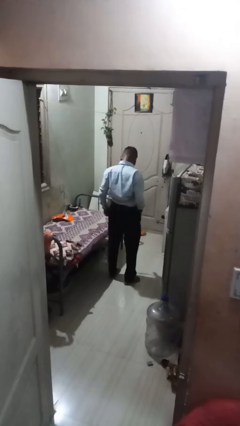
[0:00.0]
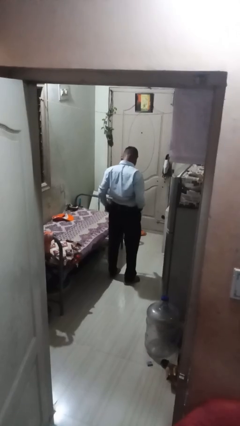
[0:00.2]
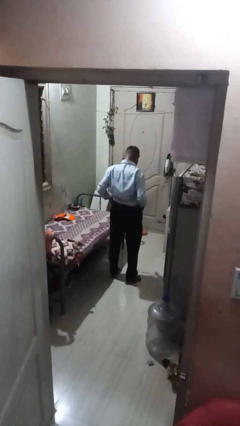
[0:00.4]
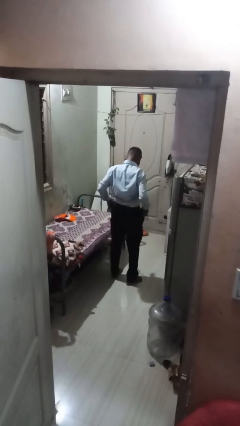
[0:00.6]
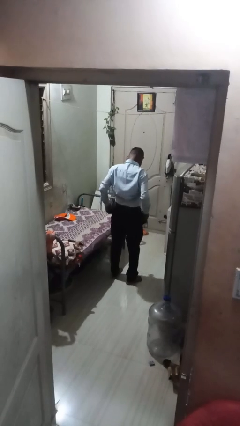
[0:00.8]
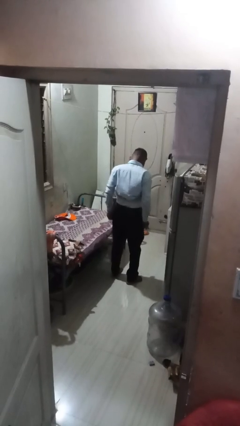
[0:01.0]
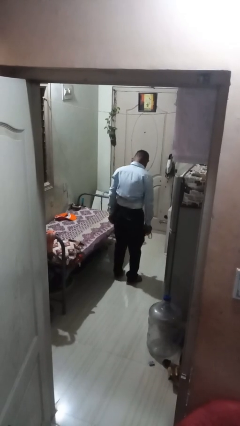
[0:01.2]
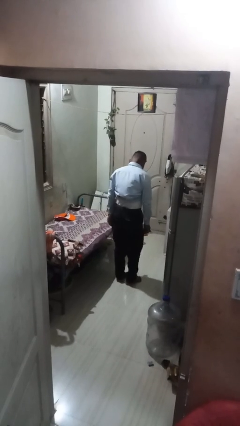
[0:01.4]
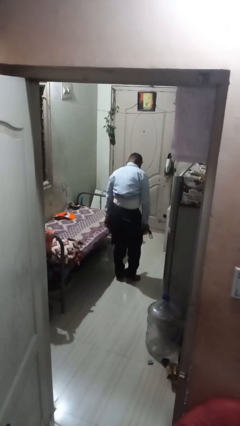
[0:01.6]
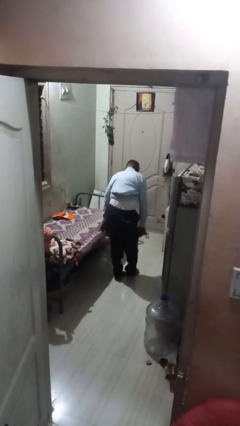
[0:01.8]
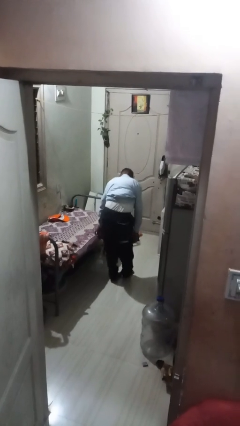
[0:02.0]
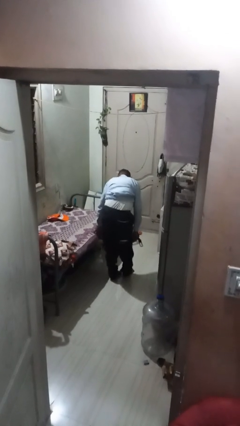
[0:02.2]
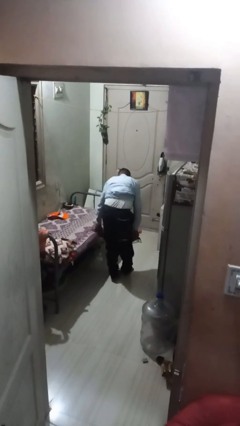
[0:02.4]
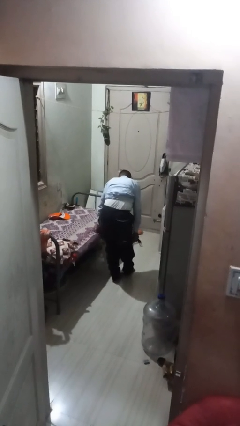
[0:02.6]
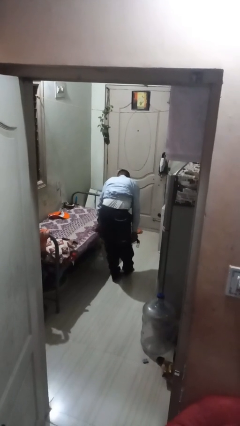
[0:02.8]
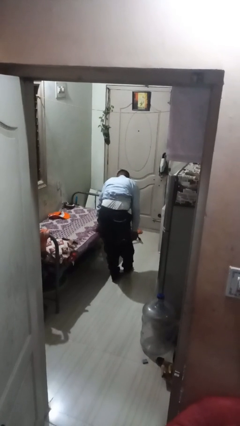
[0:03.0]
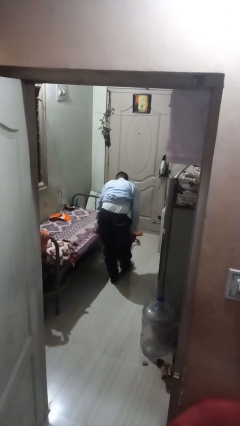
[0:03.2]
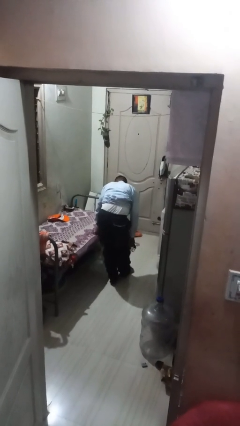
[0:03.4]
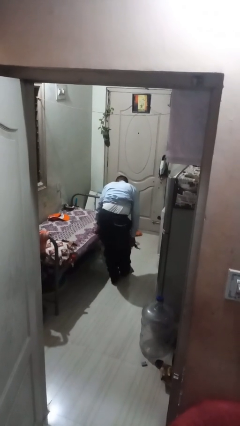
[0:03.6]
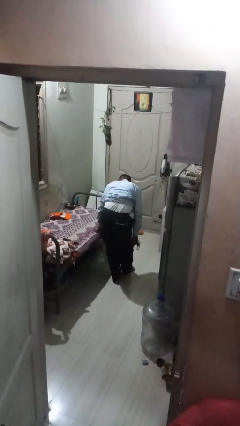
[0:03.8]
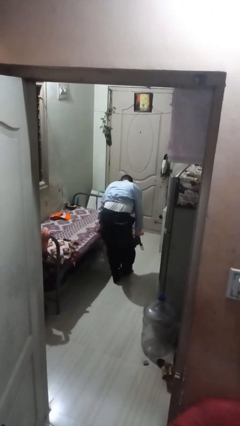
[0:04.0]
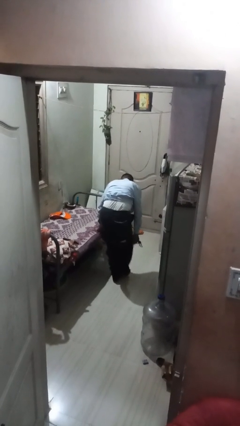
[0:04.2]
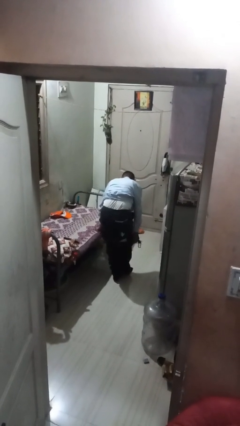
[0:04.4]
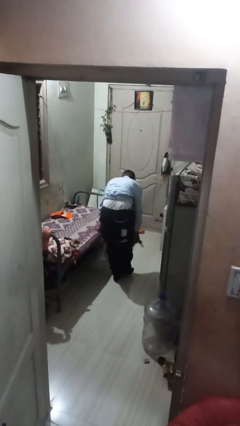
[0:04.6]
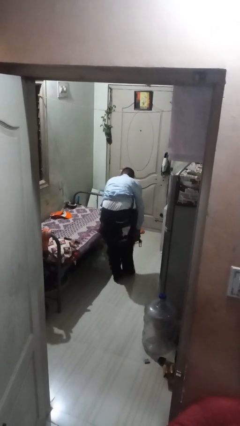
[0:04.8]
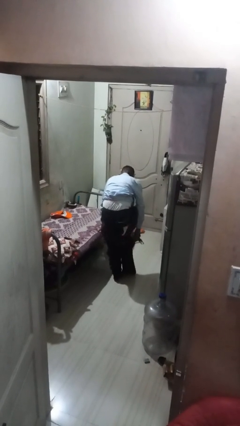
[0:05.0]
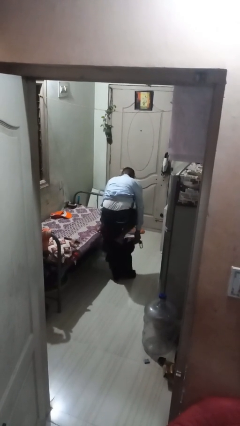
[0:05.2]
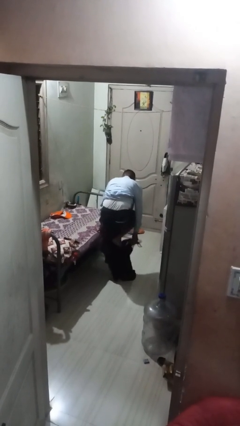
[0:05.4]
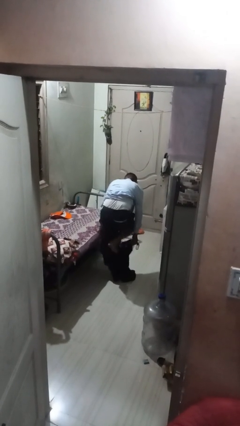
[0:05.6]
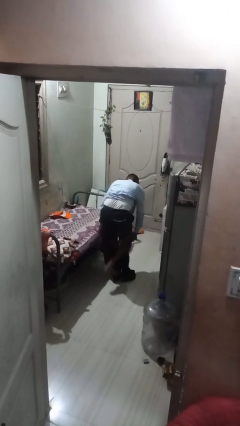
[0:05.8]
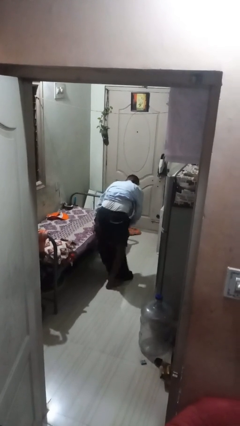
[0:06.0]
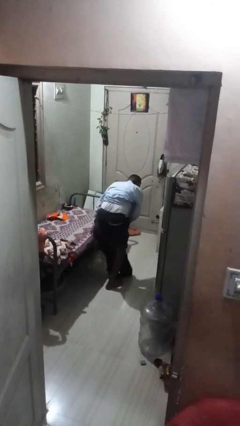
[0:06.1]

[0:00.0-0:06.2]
person takes off pants

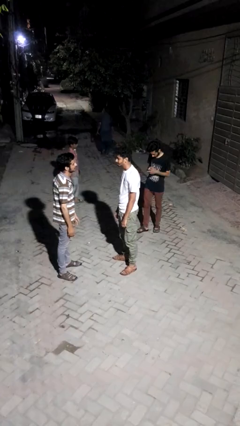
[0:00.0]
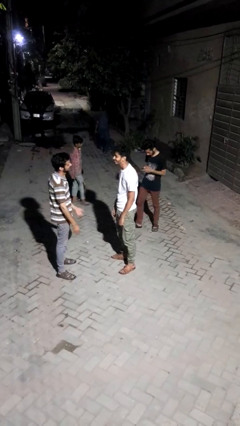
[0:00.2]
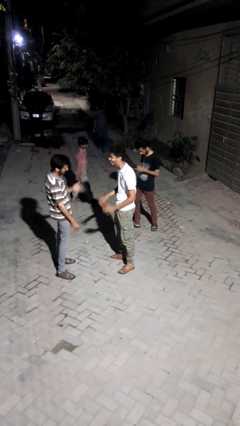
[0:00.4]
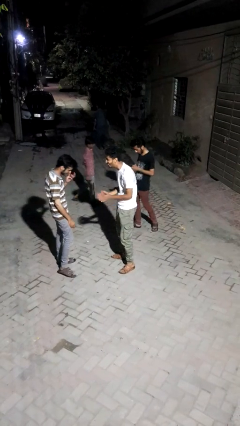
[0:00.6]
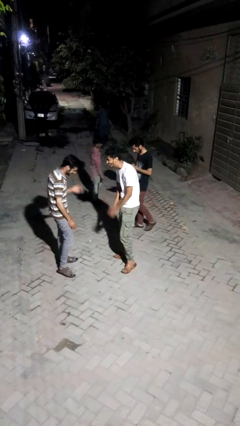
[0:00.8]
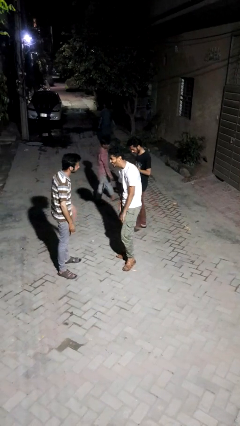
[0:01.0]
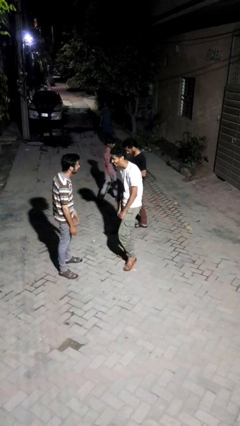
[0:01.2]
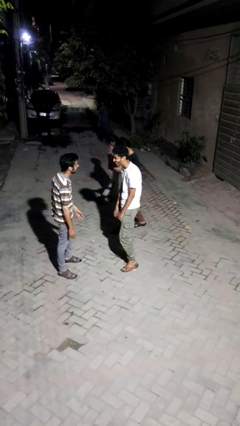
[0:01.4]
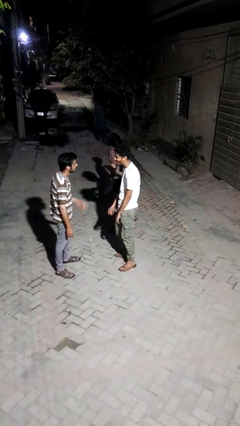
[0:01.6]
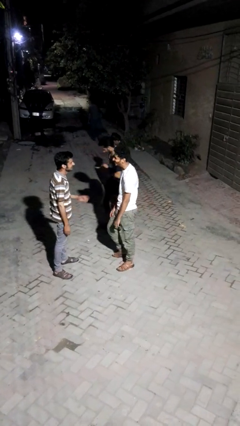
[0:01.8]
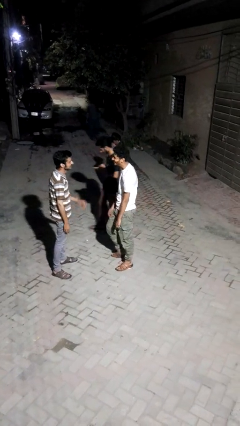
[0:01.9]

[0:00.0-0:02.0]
person laughs with person

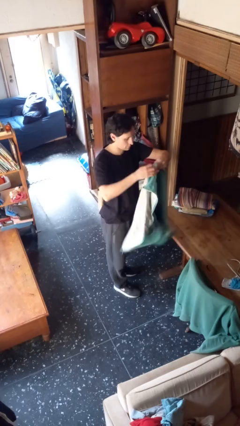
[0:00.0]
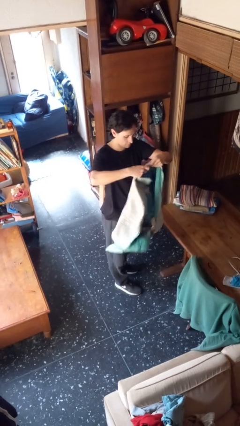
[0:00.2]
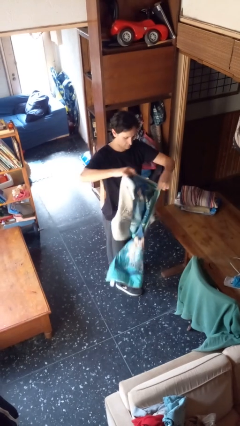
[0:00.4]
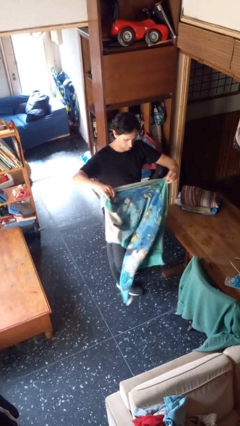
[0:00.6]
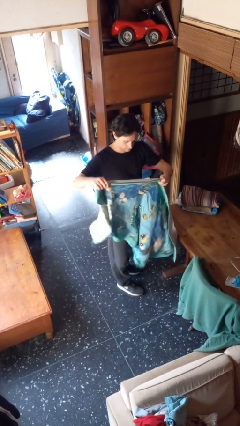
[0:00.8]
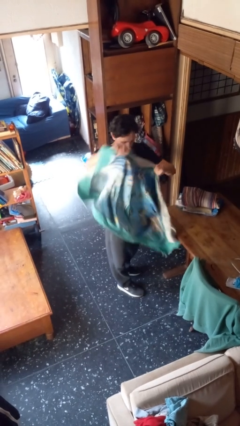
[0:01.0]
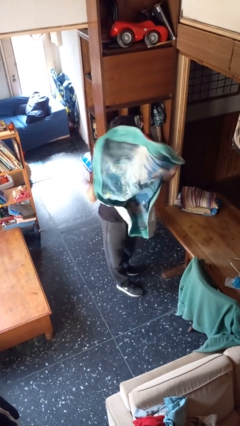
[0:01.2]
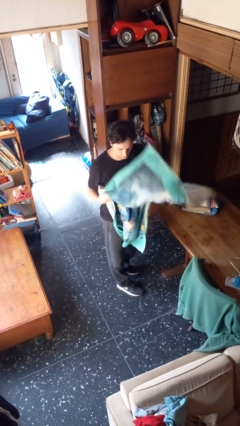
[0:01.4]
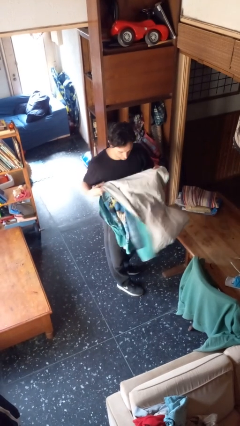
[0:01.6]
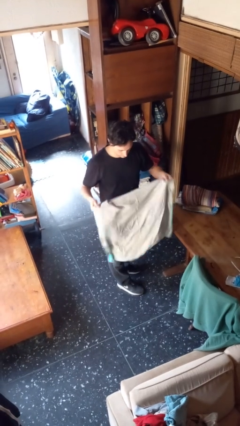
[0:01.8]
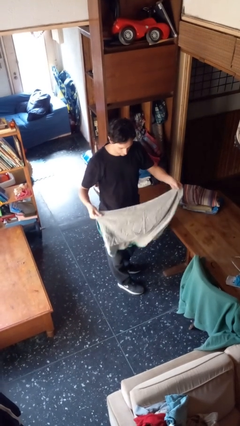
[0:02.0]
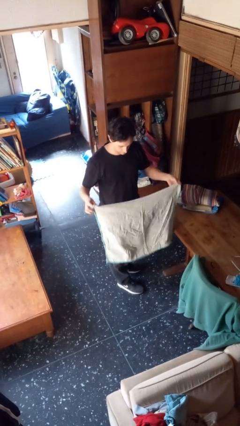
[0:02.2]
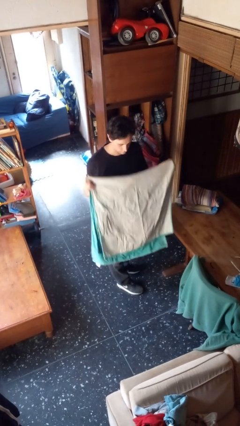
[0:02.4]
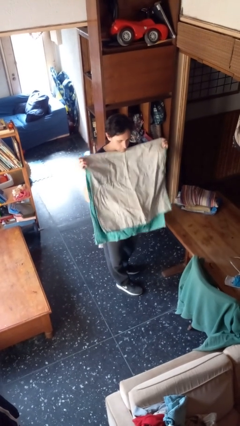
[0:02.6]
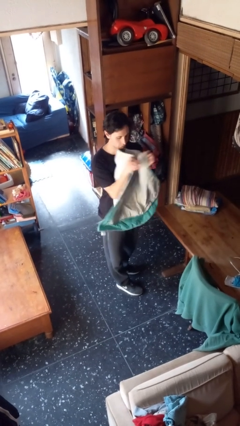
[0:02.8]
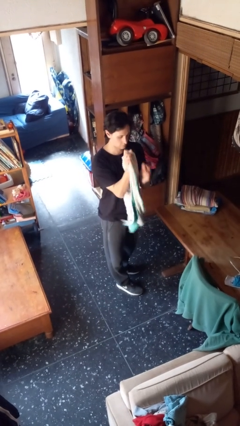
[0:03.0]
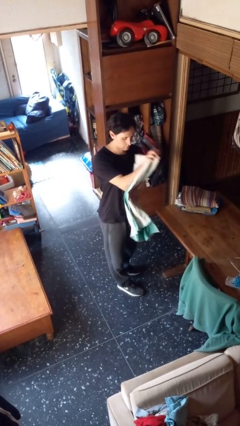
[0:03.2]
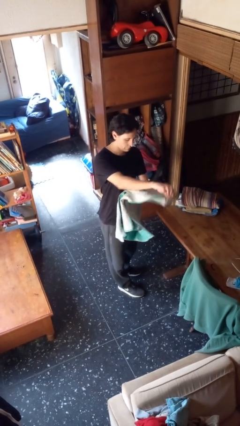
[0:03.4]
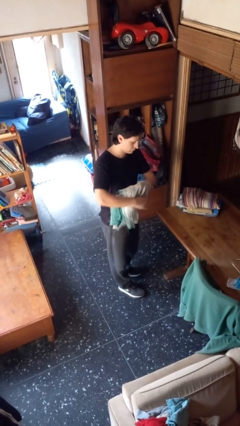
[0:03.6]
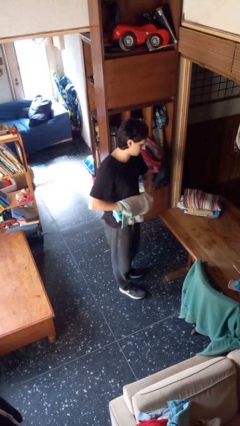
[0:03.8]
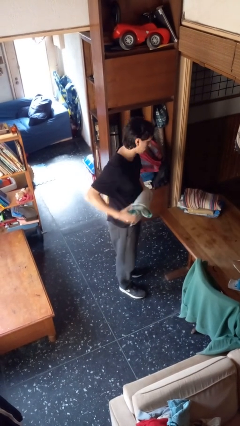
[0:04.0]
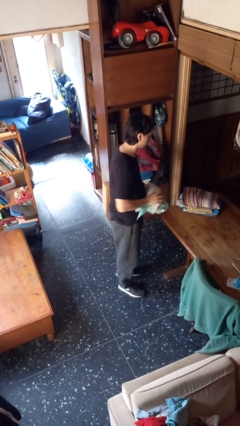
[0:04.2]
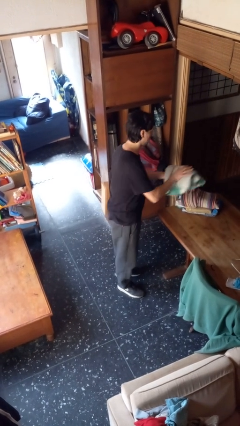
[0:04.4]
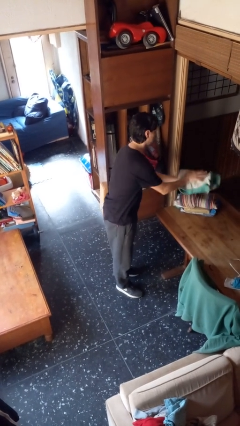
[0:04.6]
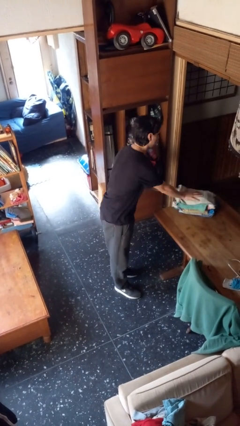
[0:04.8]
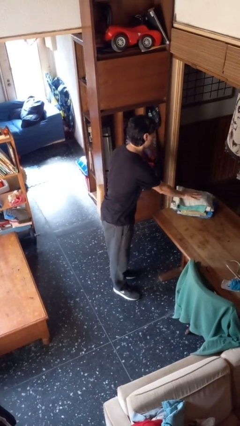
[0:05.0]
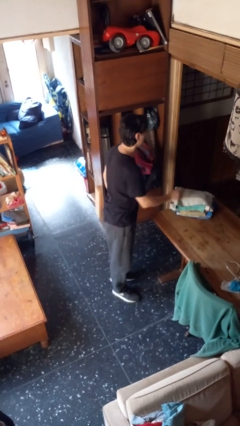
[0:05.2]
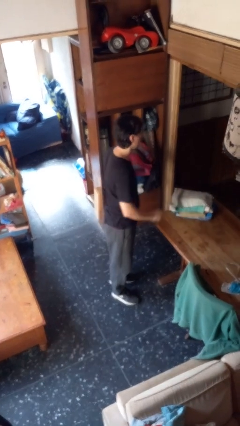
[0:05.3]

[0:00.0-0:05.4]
person folds towel

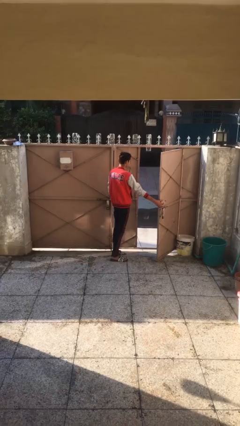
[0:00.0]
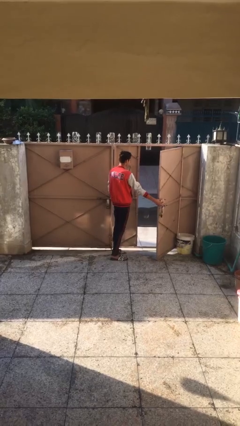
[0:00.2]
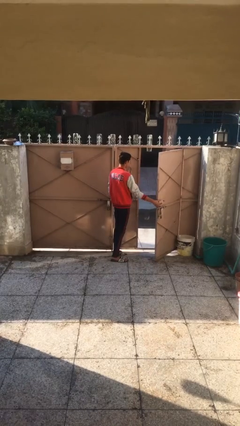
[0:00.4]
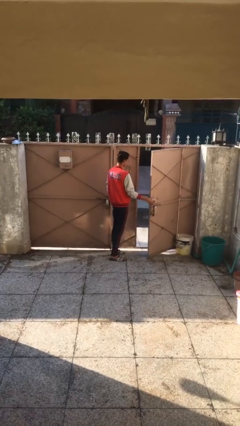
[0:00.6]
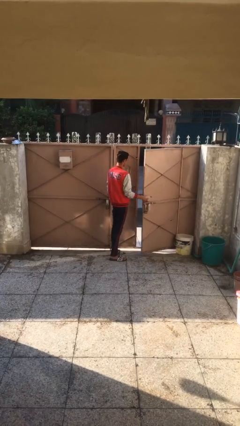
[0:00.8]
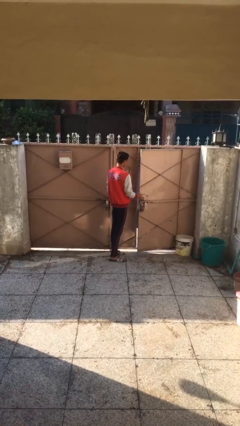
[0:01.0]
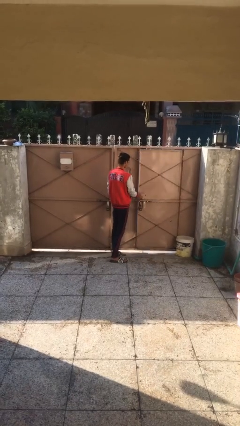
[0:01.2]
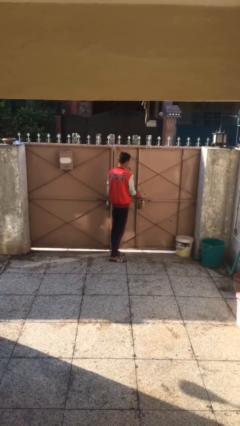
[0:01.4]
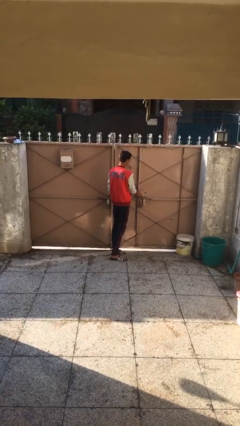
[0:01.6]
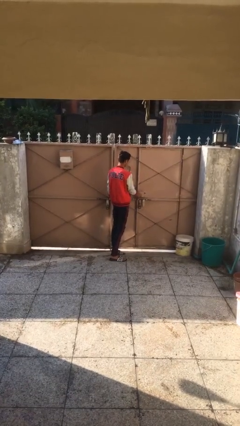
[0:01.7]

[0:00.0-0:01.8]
person closes facility door

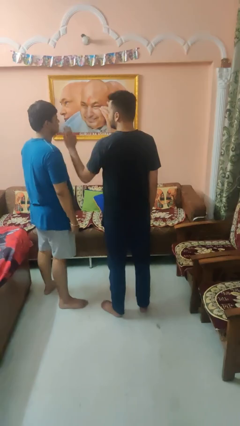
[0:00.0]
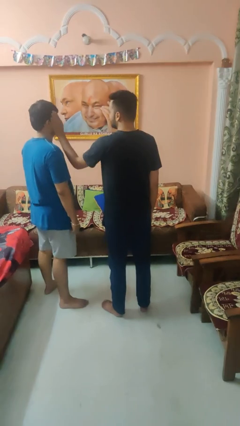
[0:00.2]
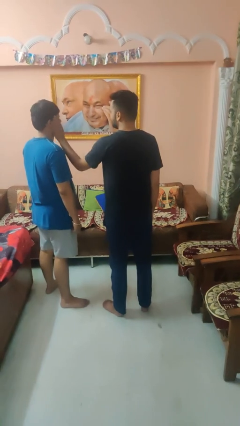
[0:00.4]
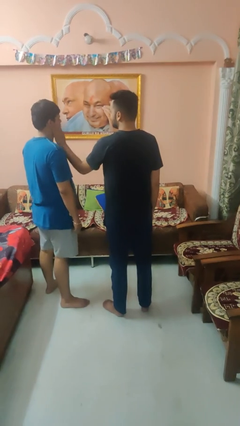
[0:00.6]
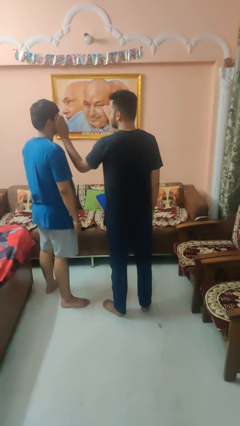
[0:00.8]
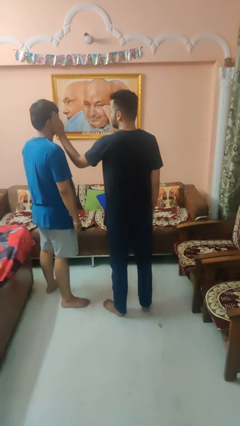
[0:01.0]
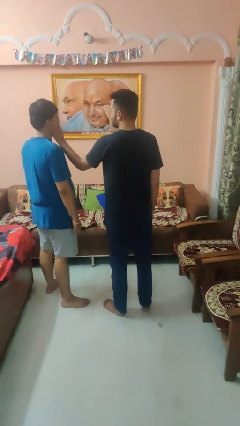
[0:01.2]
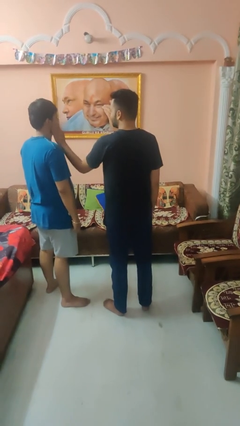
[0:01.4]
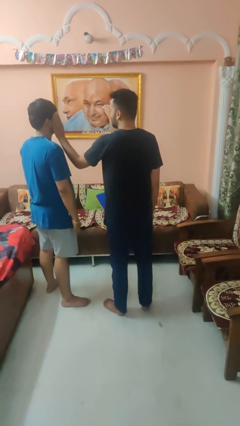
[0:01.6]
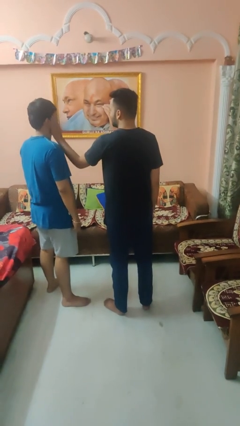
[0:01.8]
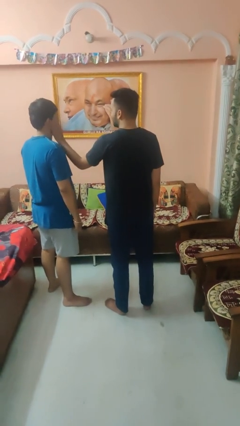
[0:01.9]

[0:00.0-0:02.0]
person touches face of person
